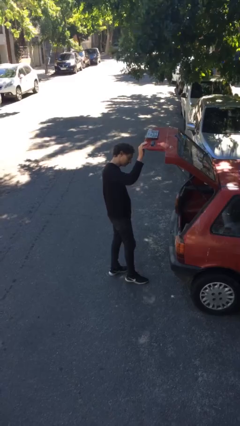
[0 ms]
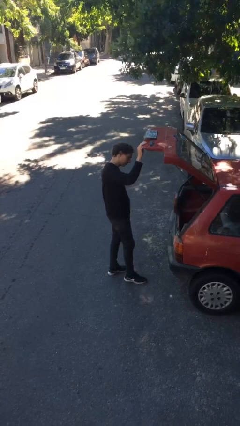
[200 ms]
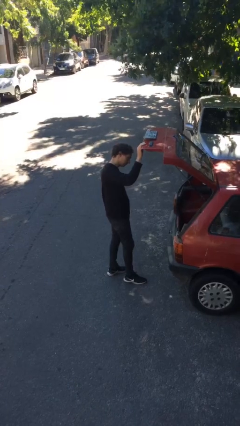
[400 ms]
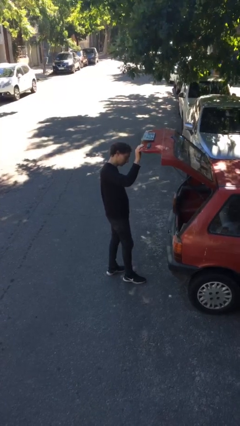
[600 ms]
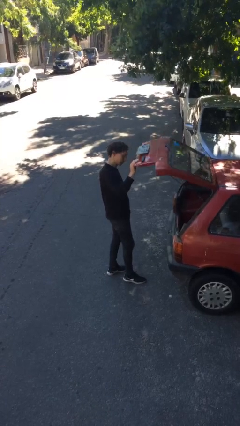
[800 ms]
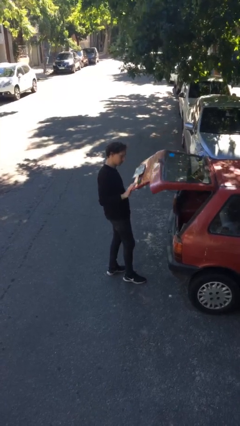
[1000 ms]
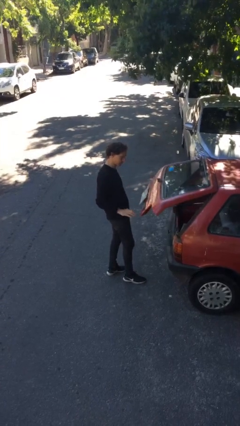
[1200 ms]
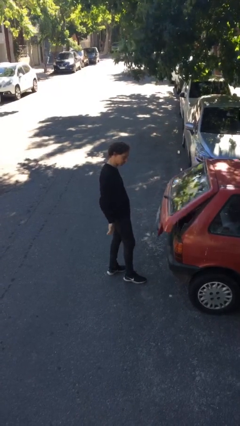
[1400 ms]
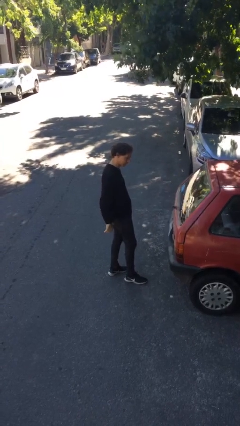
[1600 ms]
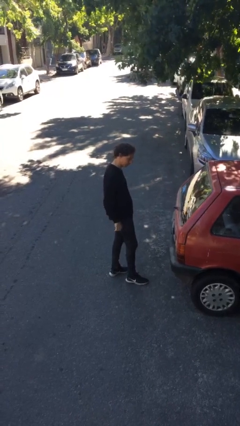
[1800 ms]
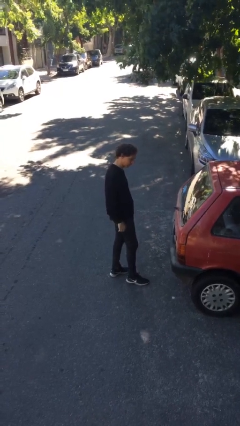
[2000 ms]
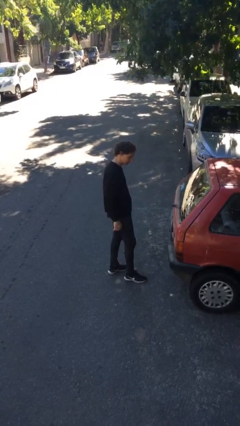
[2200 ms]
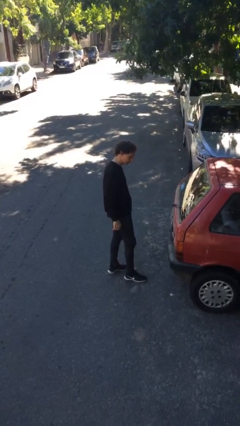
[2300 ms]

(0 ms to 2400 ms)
person closes car trunk

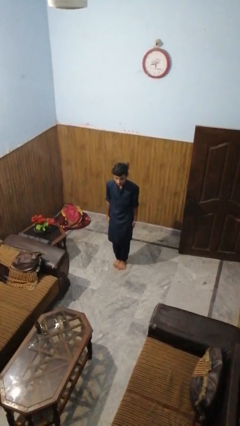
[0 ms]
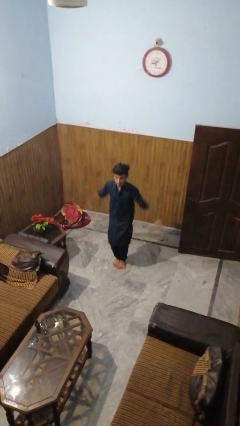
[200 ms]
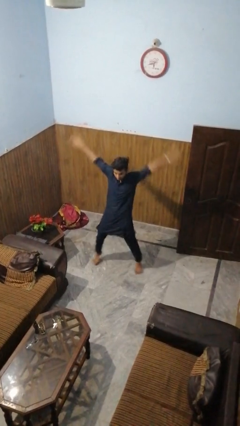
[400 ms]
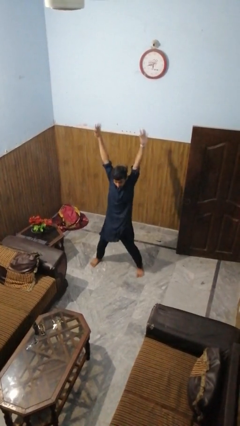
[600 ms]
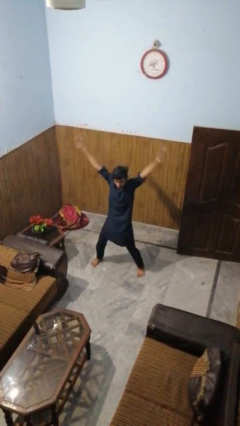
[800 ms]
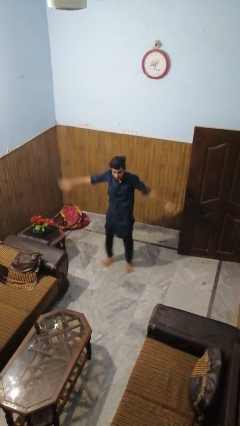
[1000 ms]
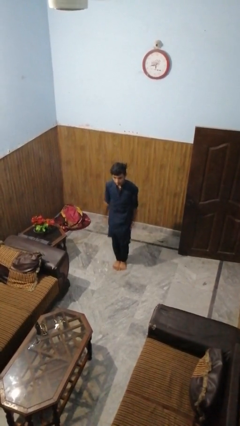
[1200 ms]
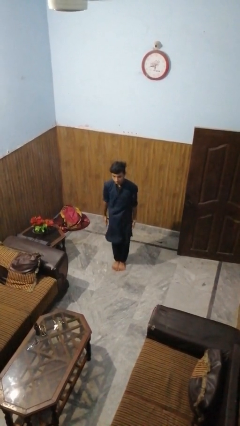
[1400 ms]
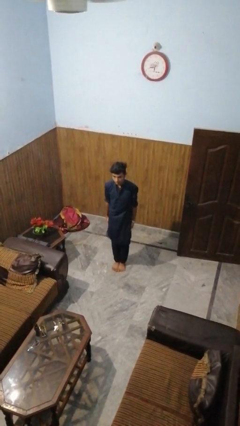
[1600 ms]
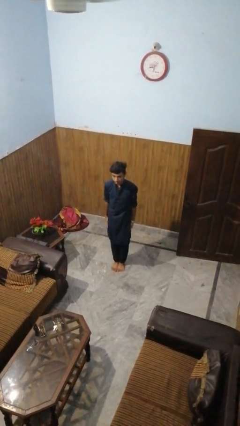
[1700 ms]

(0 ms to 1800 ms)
person exercises with jumping jacks

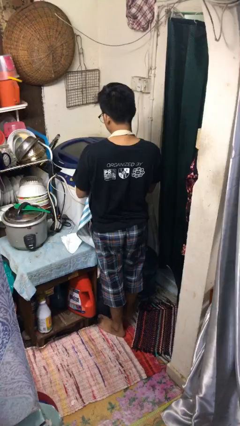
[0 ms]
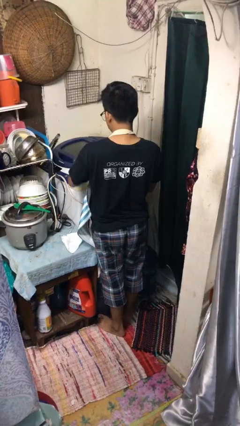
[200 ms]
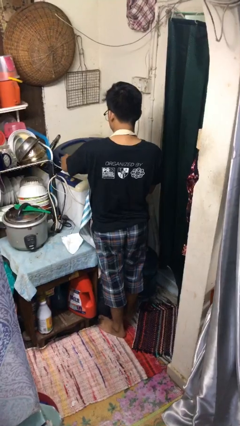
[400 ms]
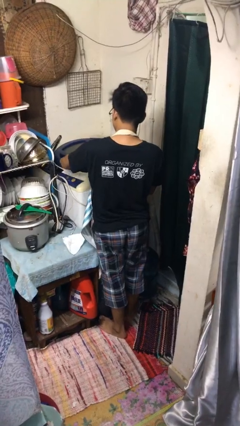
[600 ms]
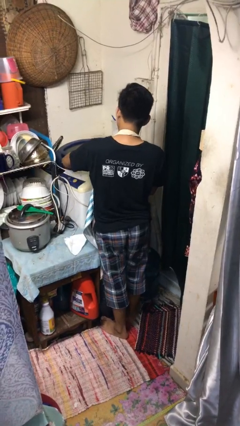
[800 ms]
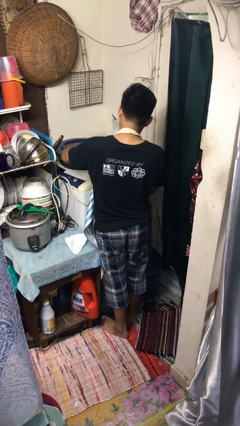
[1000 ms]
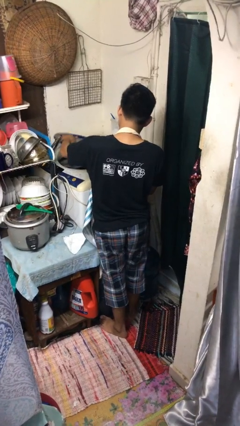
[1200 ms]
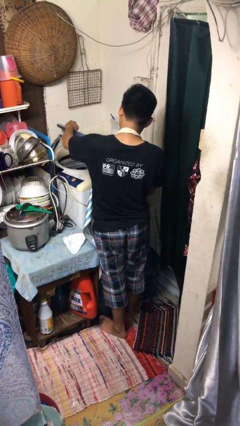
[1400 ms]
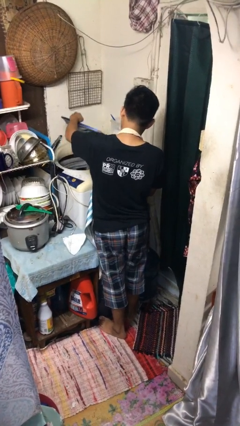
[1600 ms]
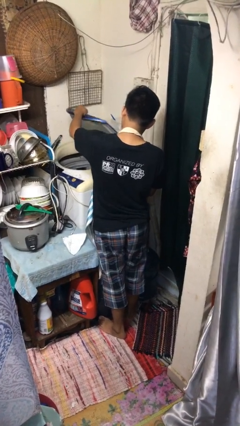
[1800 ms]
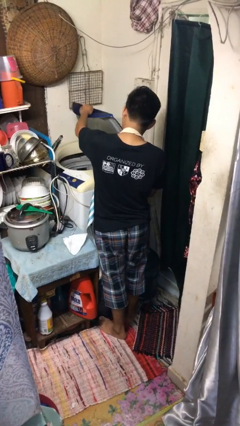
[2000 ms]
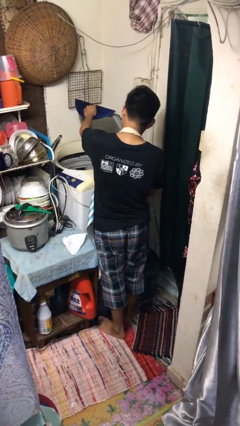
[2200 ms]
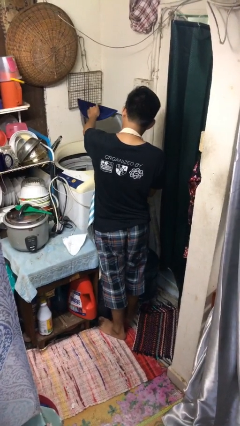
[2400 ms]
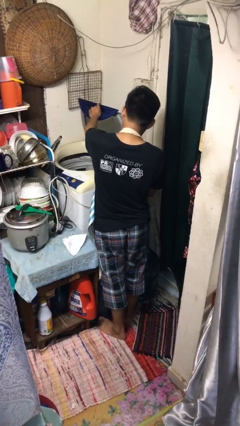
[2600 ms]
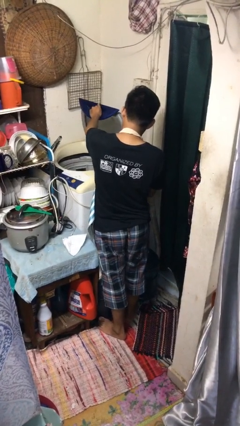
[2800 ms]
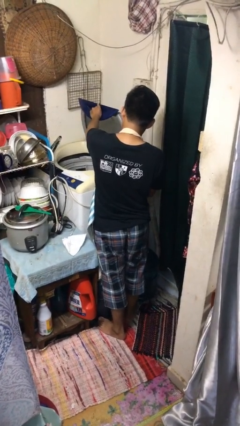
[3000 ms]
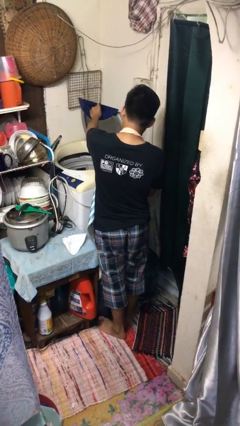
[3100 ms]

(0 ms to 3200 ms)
person opens clothes washer

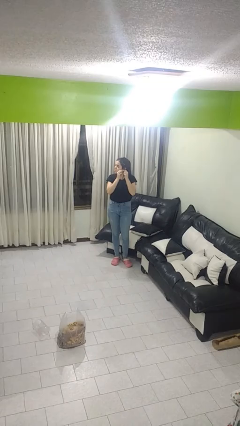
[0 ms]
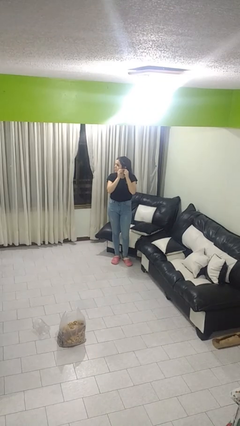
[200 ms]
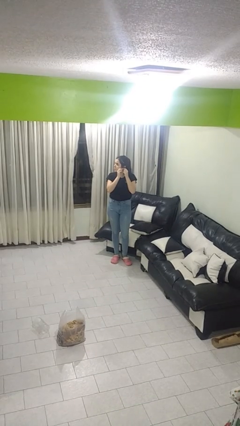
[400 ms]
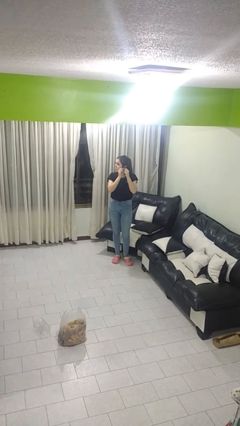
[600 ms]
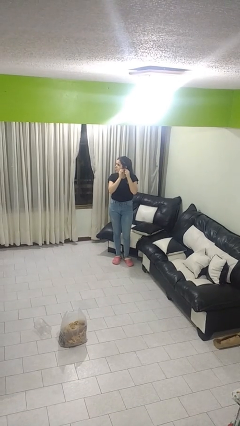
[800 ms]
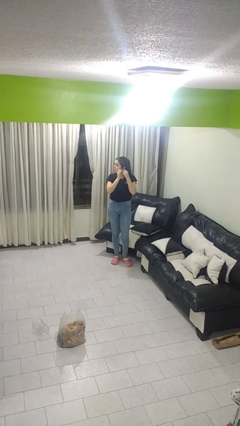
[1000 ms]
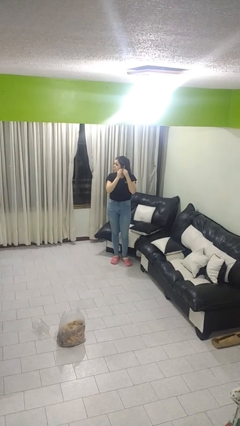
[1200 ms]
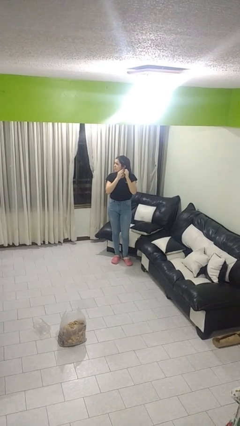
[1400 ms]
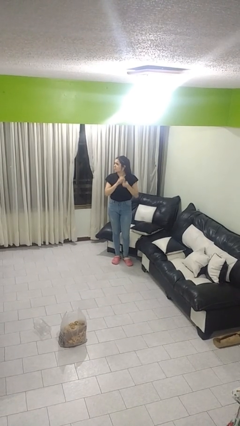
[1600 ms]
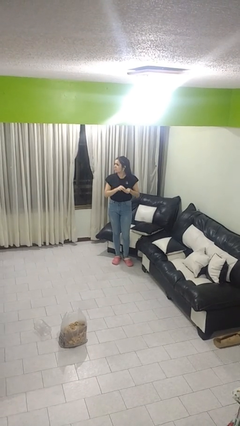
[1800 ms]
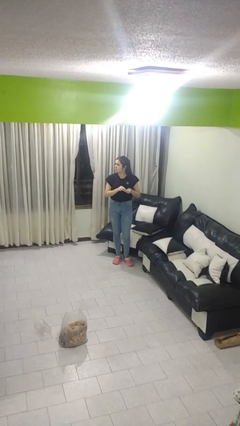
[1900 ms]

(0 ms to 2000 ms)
person puts on earrings

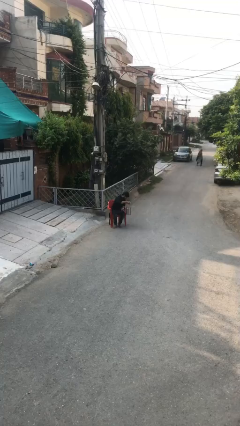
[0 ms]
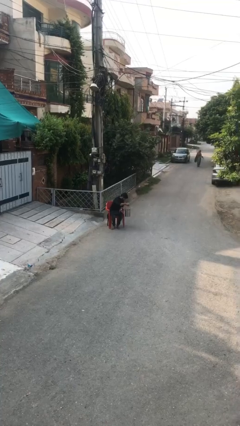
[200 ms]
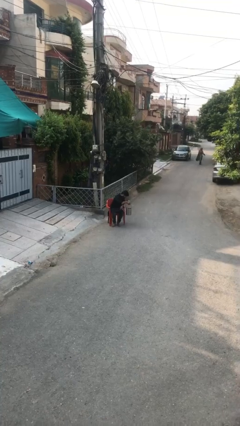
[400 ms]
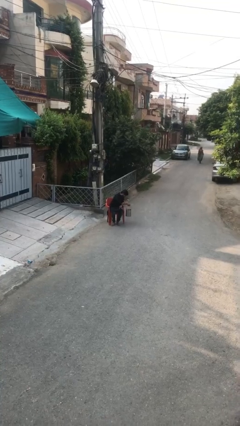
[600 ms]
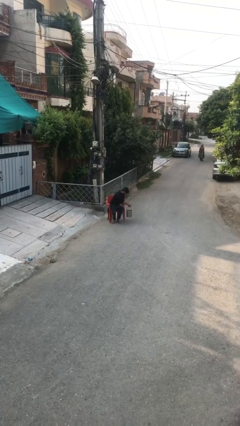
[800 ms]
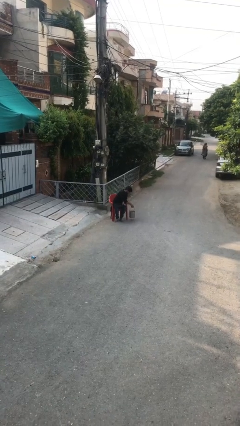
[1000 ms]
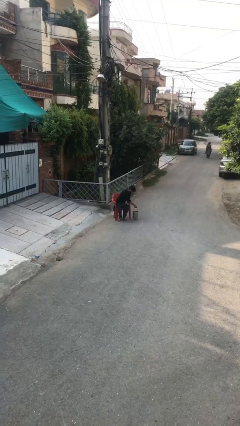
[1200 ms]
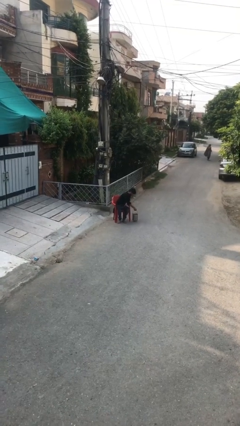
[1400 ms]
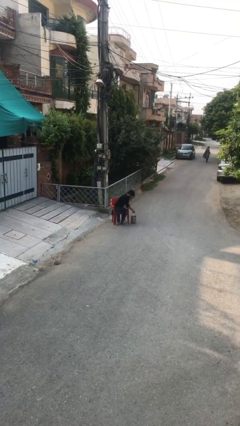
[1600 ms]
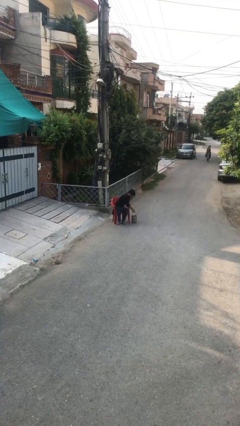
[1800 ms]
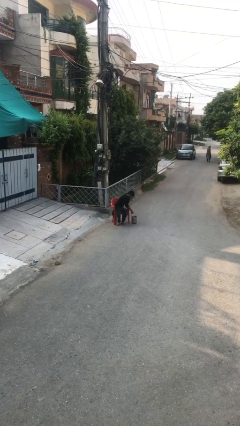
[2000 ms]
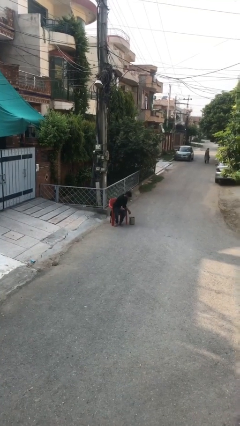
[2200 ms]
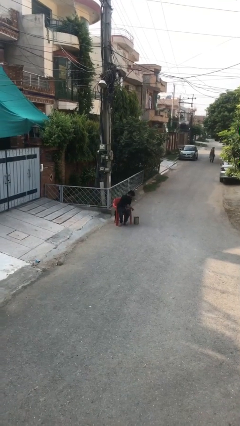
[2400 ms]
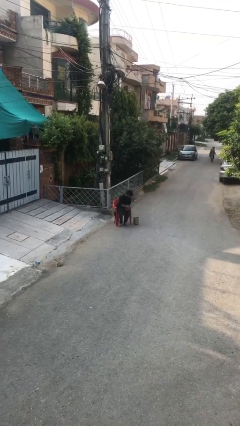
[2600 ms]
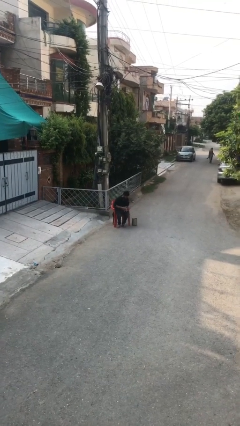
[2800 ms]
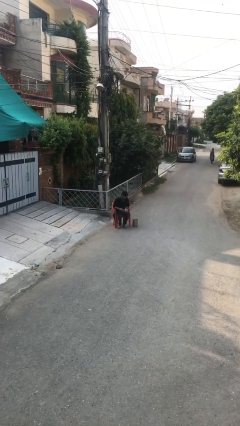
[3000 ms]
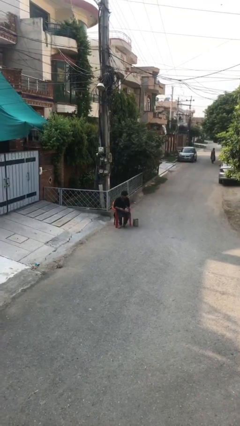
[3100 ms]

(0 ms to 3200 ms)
person puts down object on floor

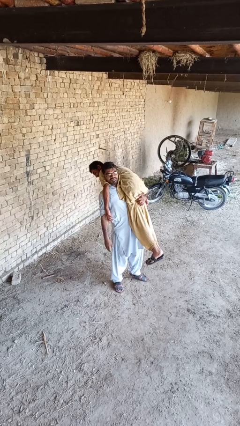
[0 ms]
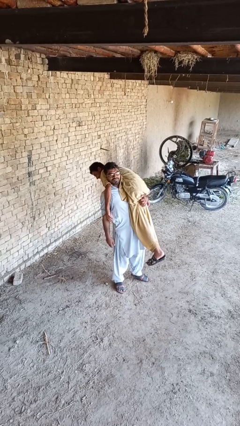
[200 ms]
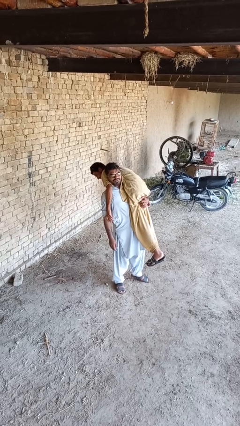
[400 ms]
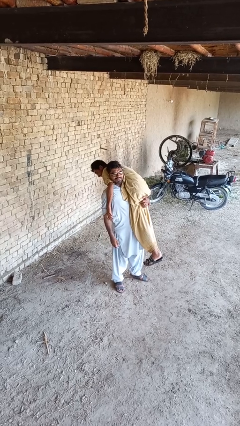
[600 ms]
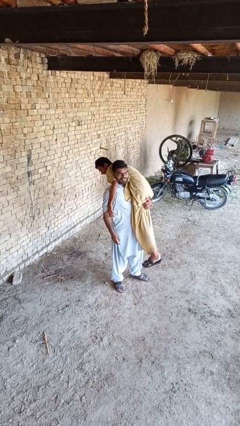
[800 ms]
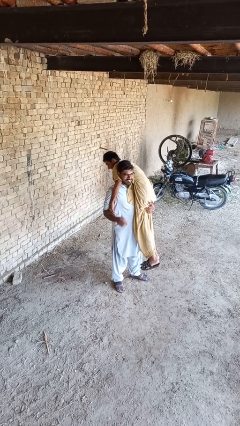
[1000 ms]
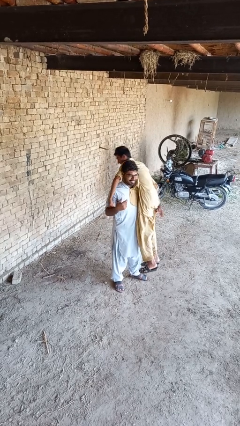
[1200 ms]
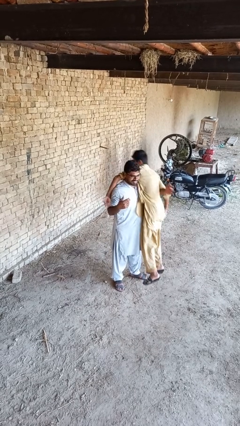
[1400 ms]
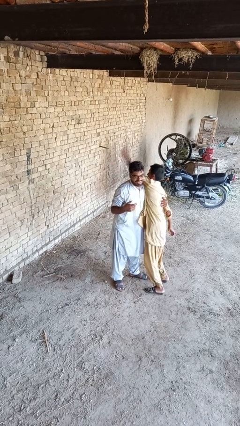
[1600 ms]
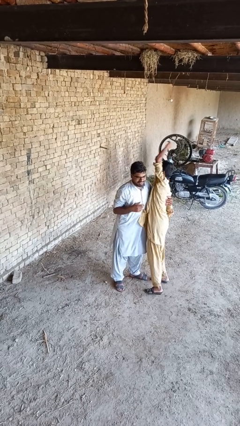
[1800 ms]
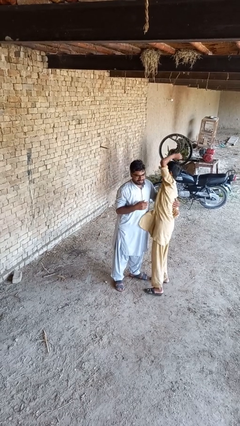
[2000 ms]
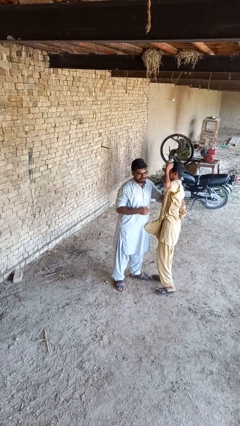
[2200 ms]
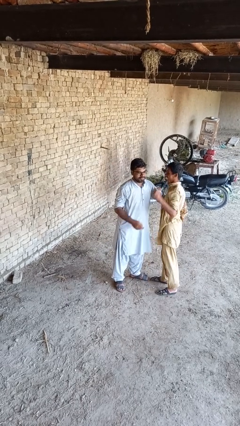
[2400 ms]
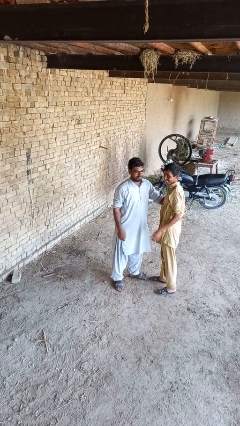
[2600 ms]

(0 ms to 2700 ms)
person puts down person

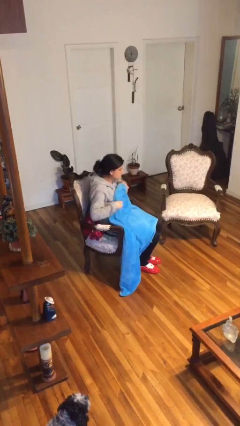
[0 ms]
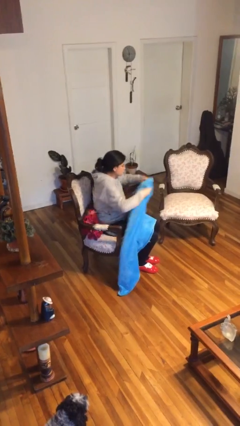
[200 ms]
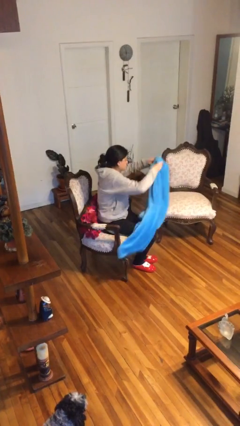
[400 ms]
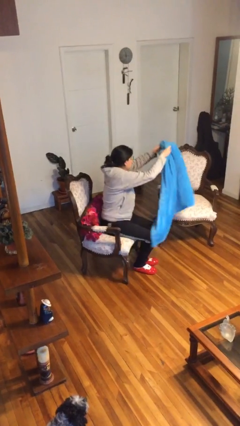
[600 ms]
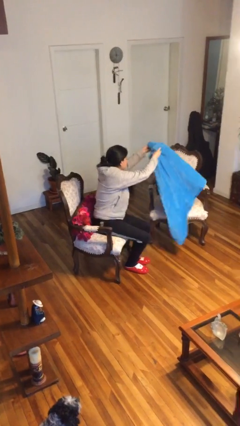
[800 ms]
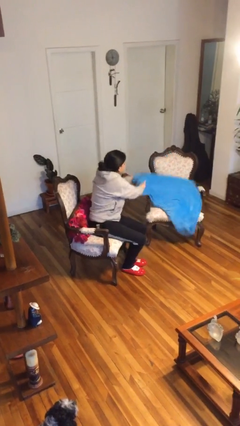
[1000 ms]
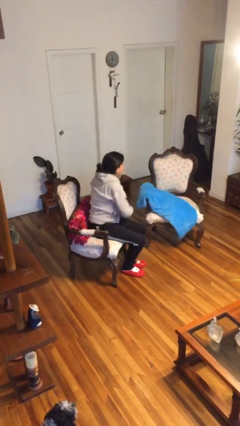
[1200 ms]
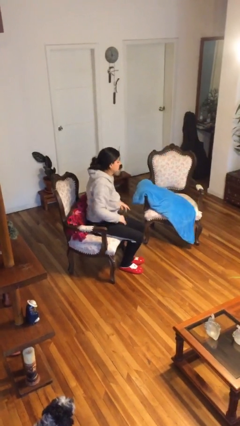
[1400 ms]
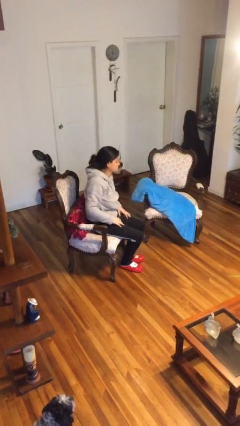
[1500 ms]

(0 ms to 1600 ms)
person uncovers with blanket
